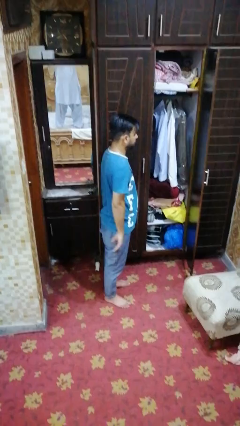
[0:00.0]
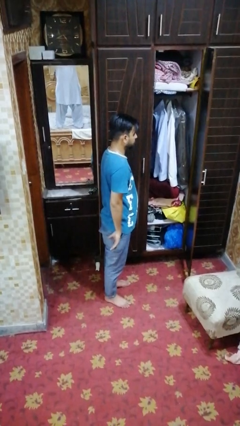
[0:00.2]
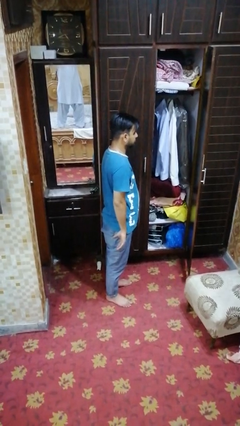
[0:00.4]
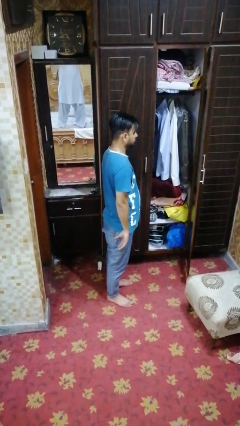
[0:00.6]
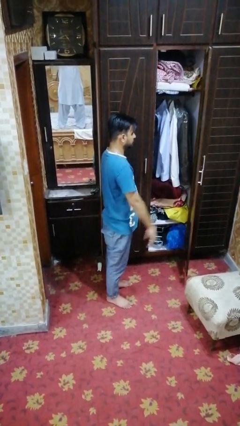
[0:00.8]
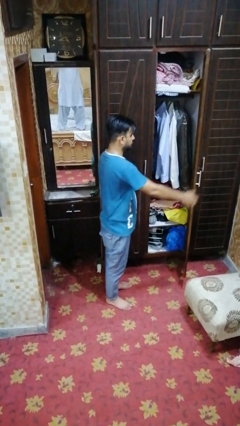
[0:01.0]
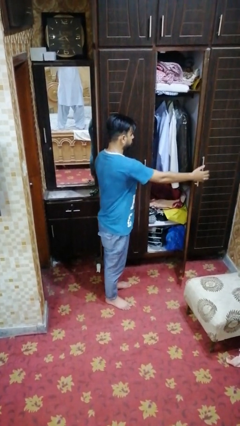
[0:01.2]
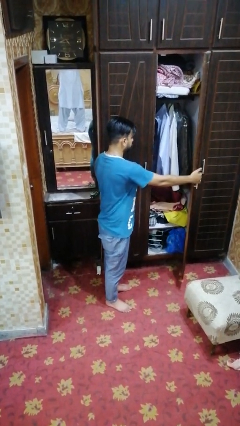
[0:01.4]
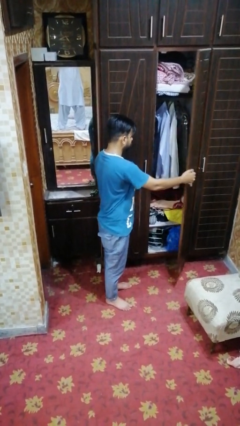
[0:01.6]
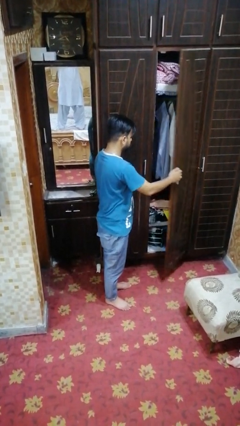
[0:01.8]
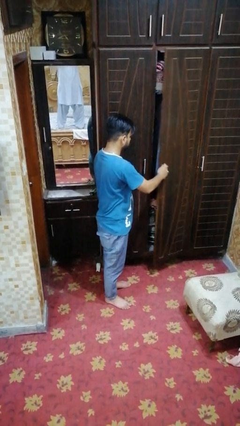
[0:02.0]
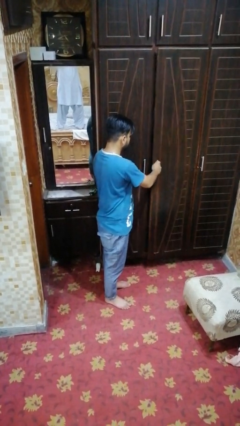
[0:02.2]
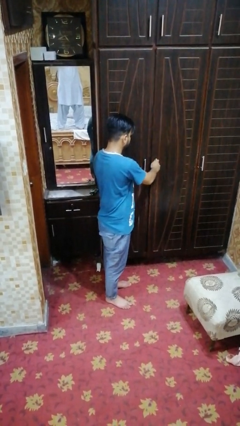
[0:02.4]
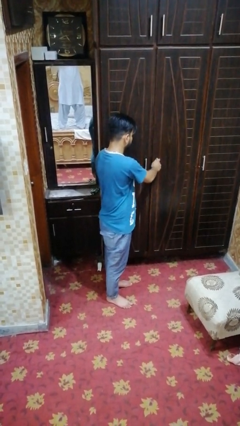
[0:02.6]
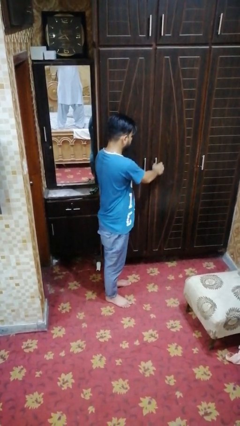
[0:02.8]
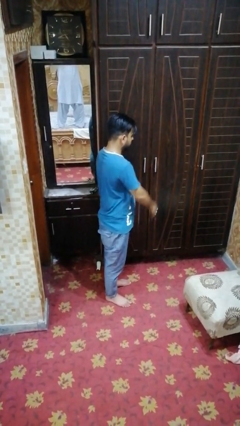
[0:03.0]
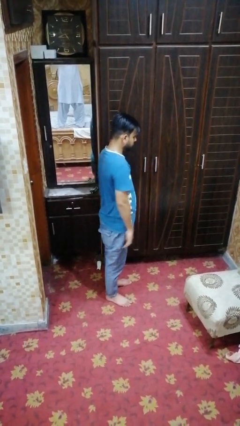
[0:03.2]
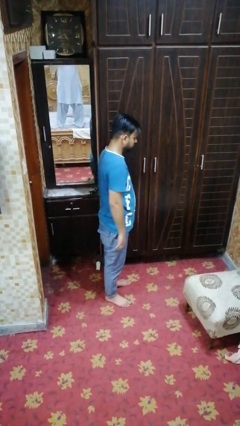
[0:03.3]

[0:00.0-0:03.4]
person closes closet door

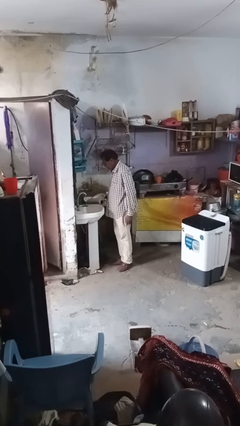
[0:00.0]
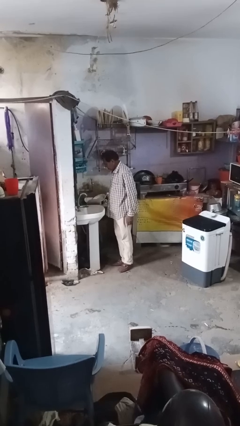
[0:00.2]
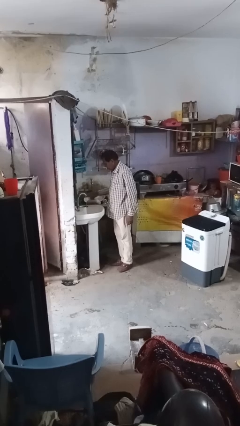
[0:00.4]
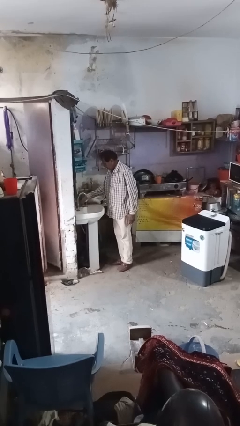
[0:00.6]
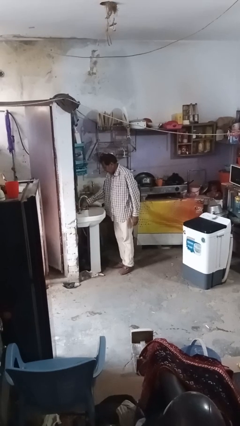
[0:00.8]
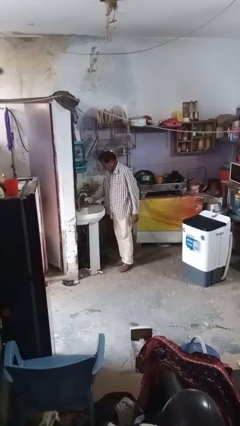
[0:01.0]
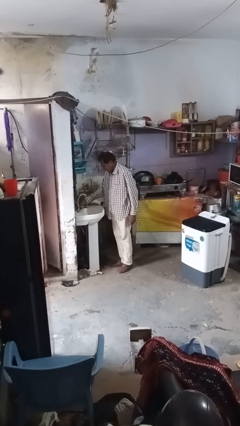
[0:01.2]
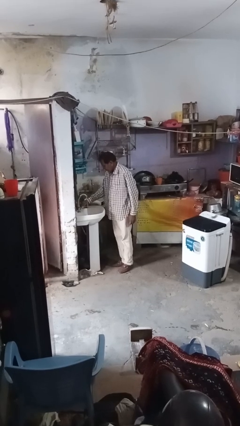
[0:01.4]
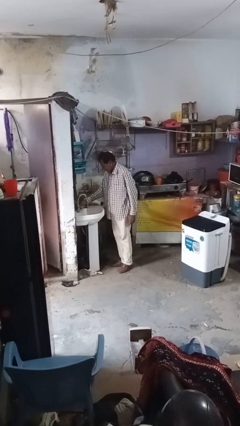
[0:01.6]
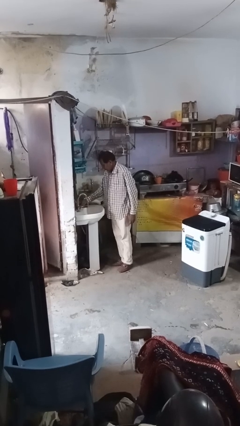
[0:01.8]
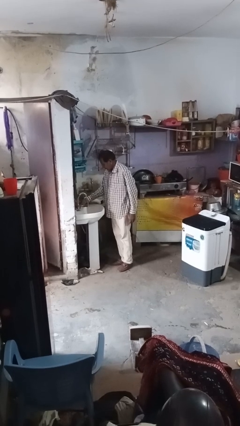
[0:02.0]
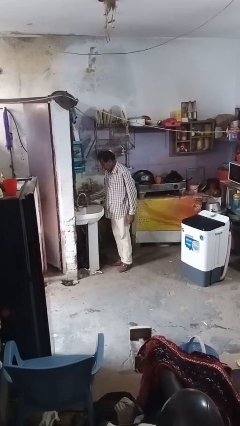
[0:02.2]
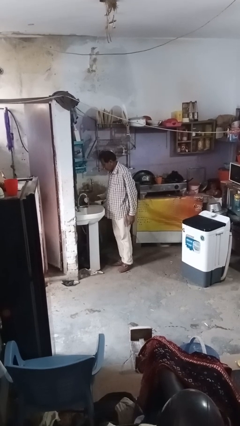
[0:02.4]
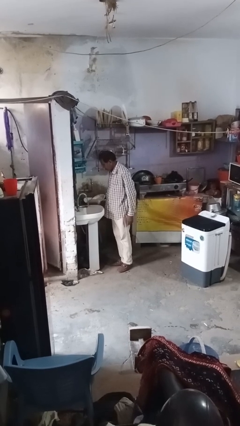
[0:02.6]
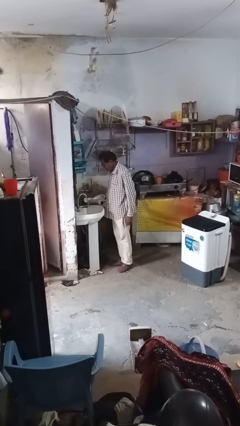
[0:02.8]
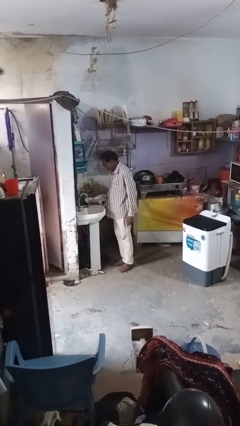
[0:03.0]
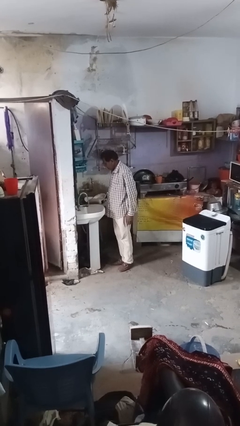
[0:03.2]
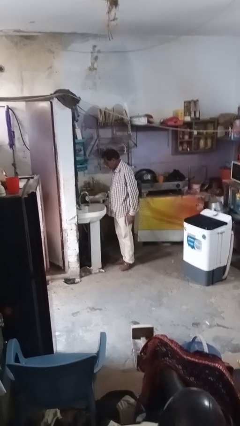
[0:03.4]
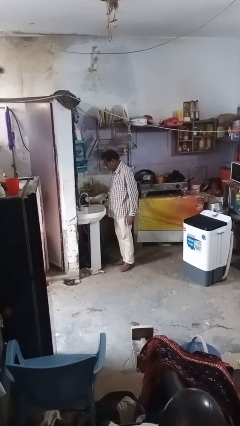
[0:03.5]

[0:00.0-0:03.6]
person turns on faucet

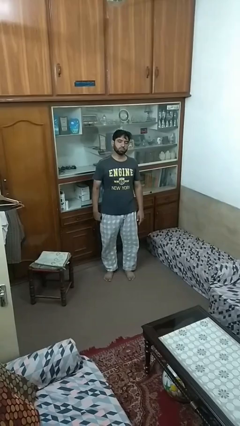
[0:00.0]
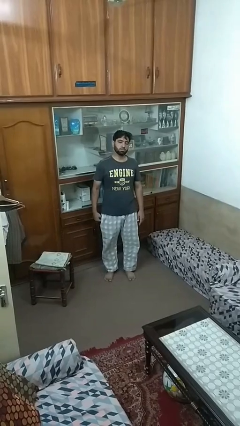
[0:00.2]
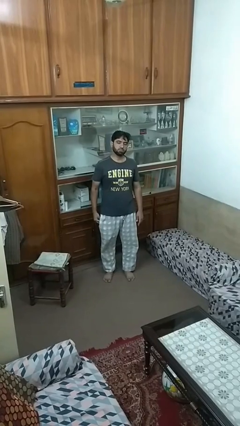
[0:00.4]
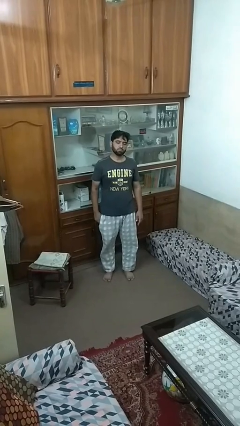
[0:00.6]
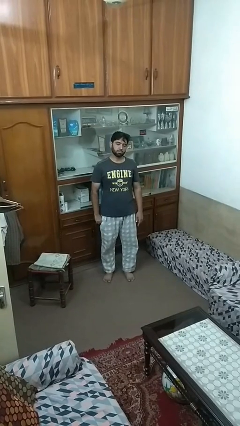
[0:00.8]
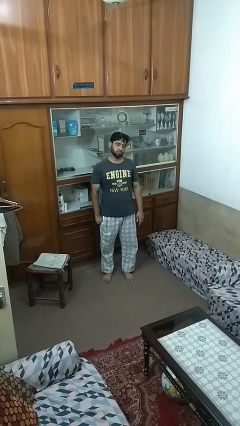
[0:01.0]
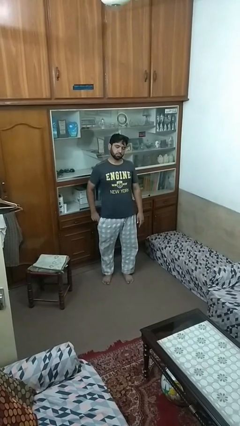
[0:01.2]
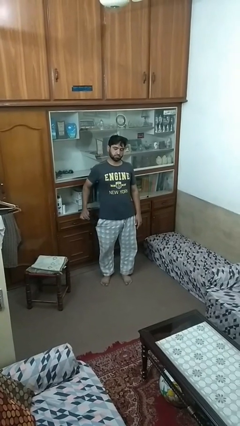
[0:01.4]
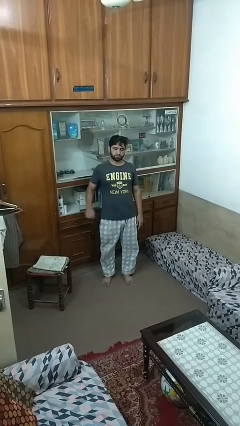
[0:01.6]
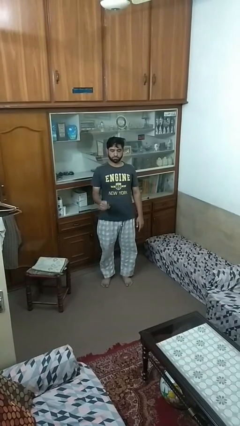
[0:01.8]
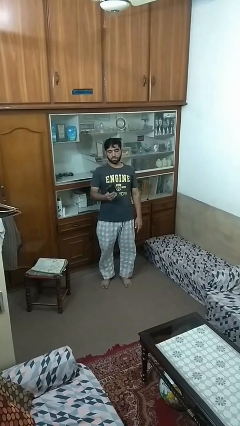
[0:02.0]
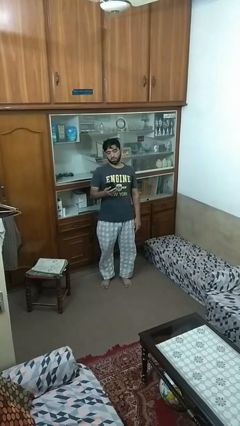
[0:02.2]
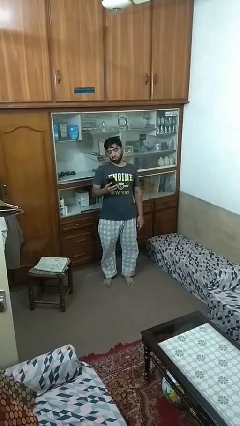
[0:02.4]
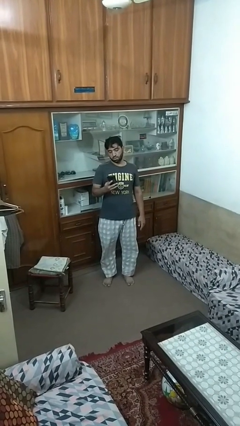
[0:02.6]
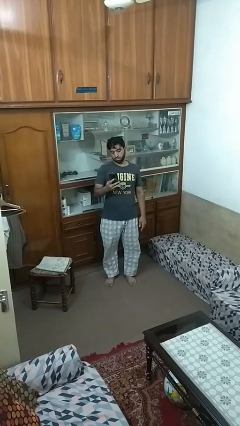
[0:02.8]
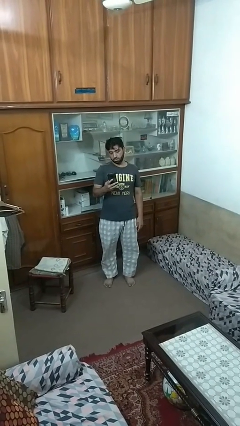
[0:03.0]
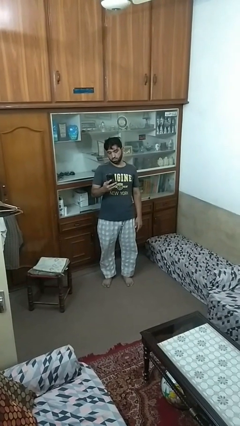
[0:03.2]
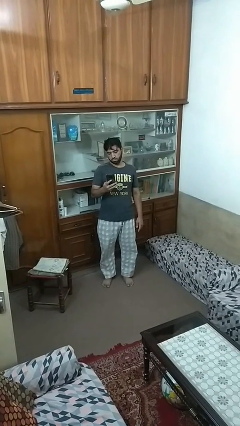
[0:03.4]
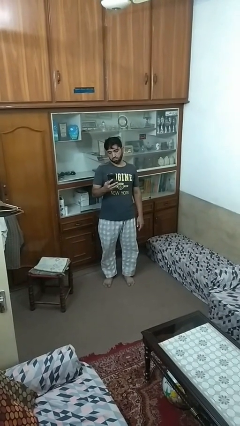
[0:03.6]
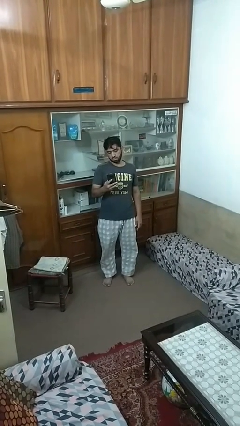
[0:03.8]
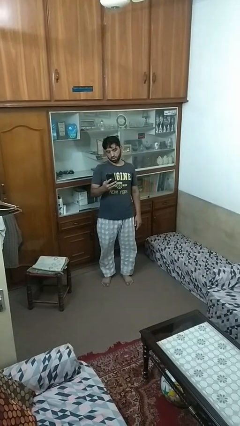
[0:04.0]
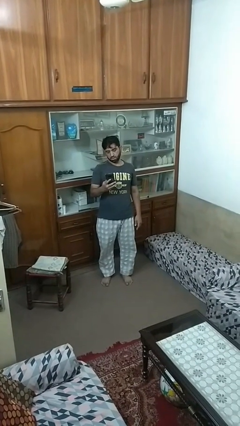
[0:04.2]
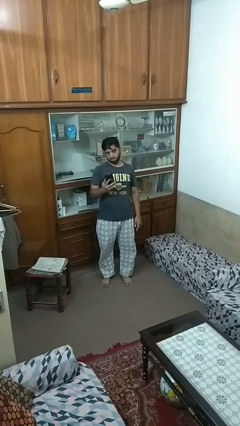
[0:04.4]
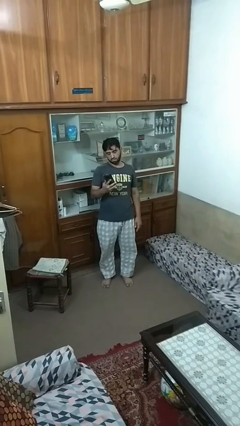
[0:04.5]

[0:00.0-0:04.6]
person takes phone from pocket

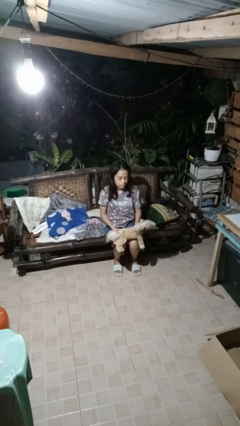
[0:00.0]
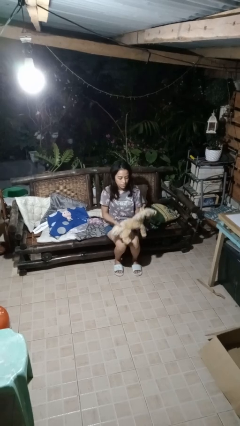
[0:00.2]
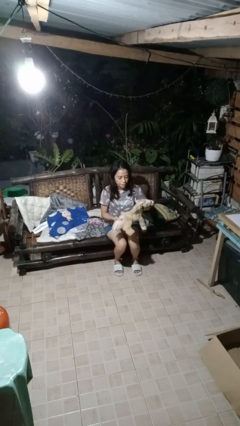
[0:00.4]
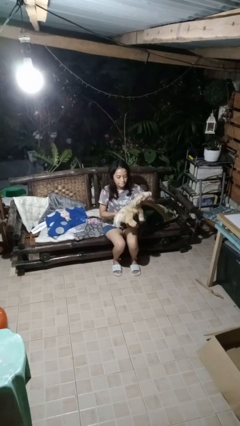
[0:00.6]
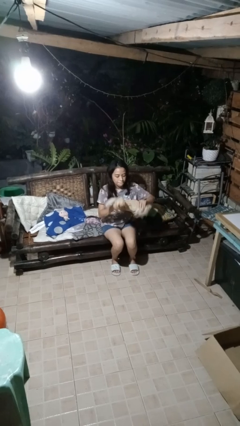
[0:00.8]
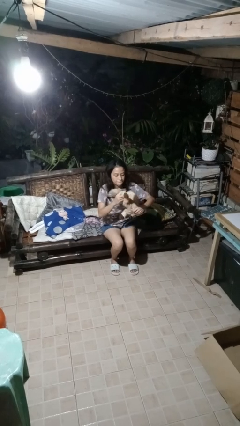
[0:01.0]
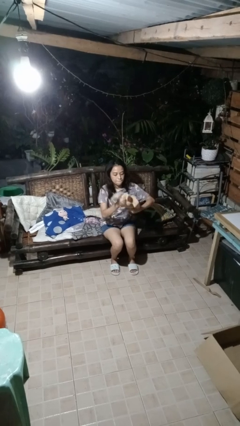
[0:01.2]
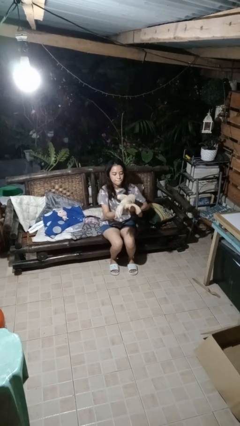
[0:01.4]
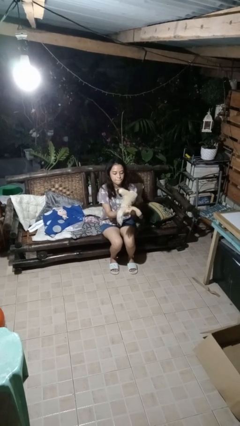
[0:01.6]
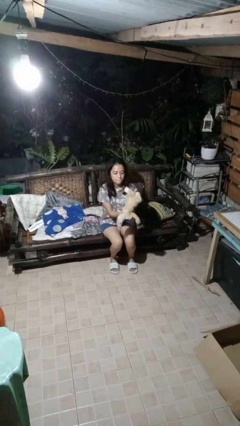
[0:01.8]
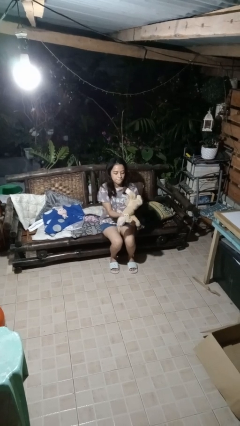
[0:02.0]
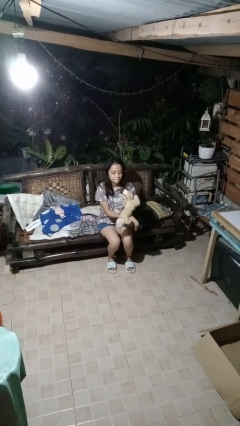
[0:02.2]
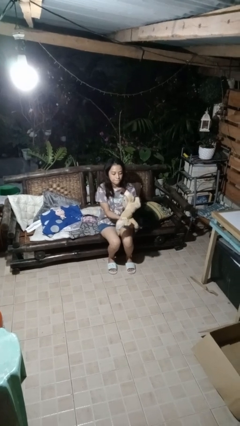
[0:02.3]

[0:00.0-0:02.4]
person squeezes object

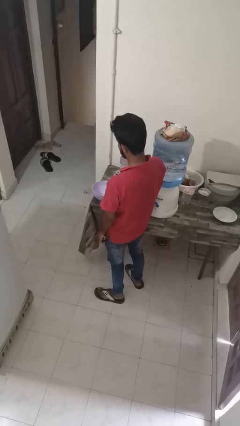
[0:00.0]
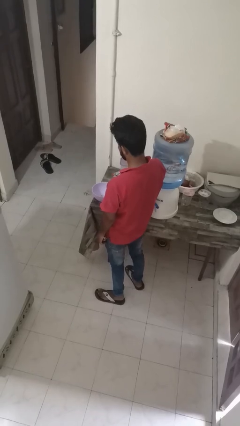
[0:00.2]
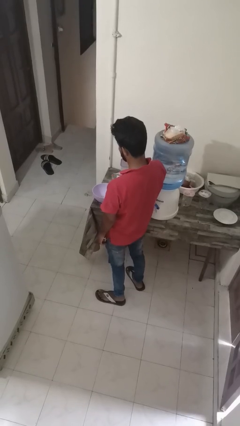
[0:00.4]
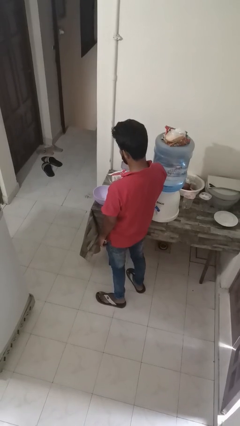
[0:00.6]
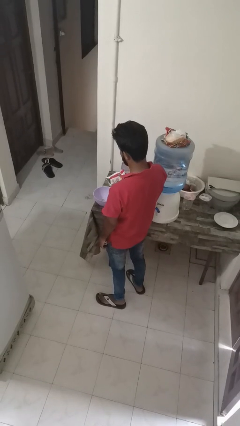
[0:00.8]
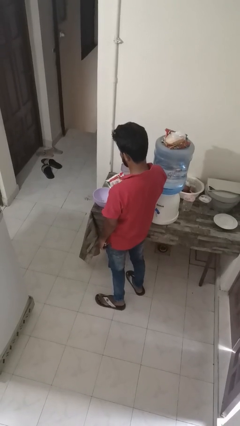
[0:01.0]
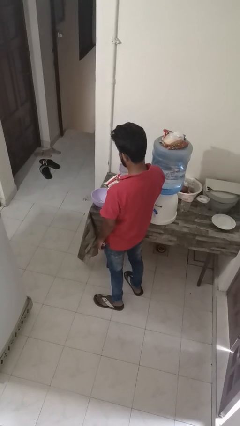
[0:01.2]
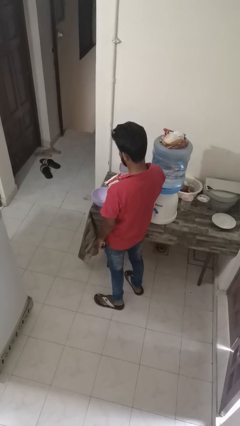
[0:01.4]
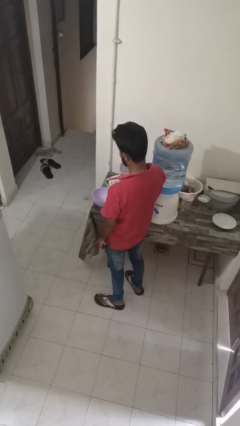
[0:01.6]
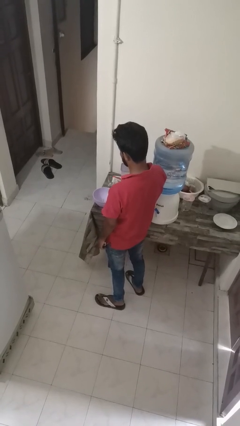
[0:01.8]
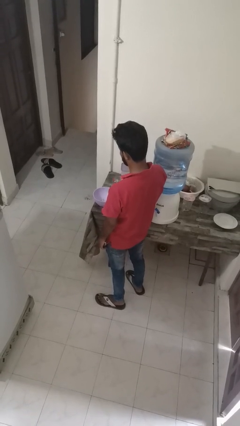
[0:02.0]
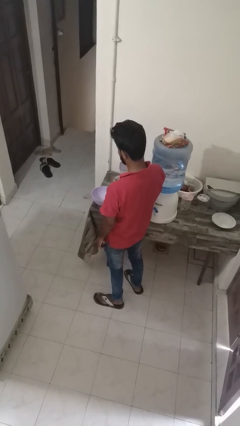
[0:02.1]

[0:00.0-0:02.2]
person pours into bowl

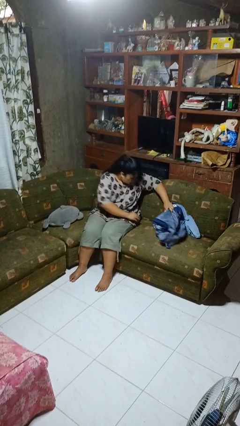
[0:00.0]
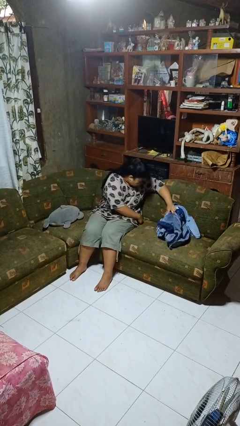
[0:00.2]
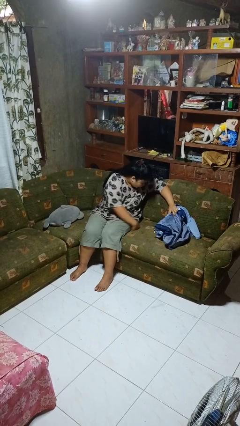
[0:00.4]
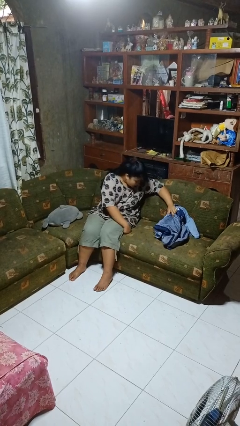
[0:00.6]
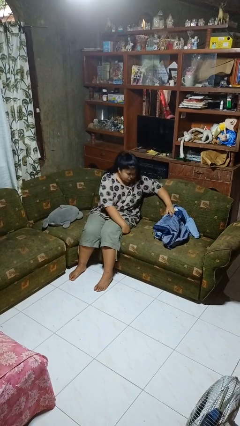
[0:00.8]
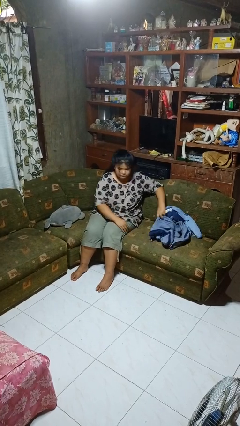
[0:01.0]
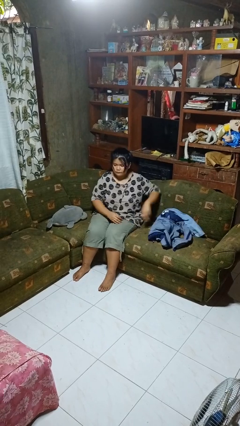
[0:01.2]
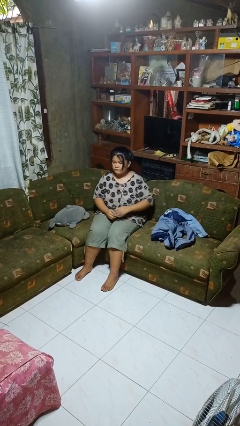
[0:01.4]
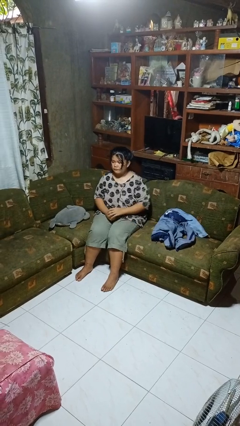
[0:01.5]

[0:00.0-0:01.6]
person searches in couch
